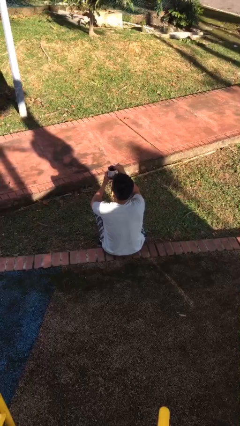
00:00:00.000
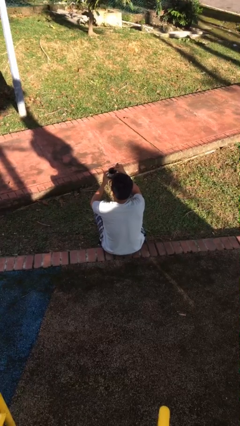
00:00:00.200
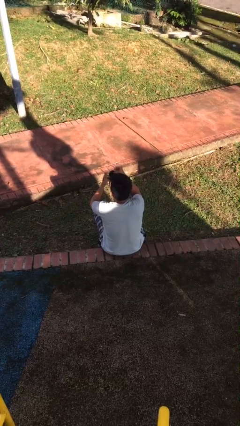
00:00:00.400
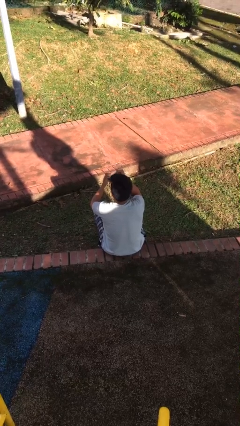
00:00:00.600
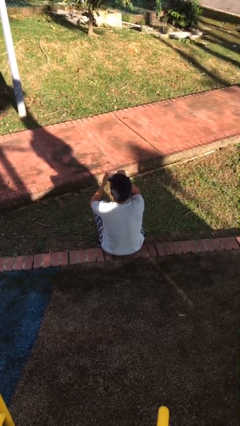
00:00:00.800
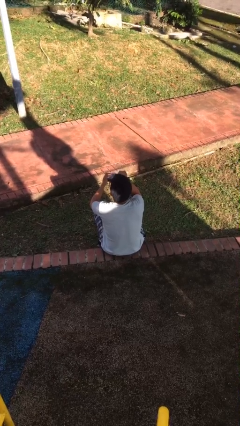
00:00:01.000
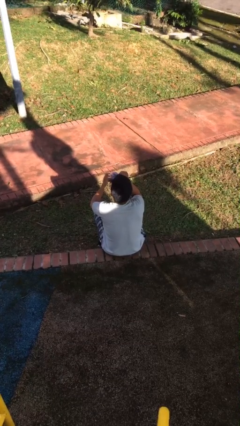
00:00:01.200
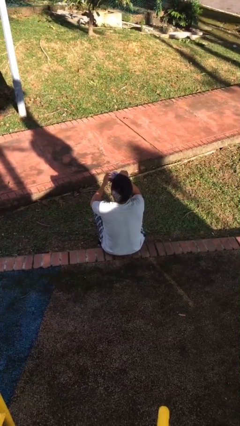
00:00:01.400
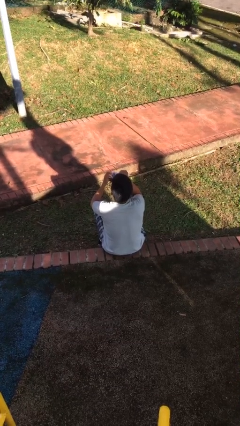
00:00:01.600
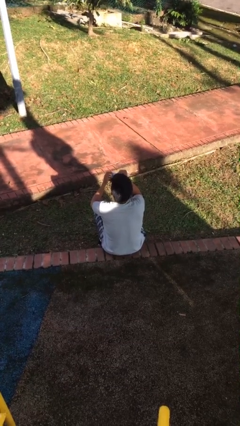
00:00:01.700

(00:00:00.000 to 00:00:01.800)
person drinks from mug

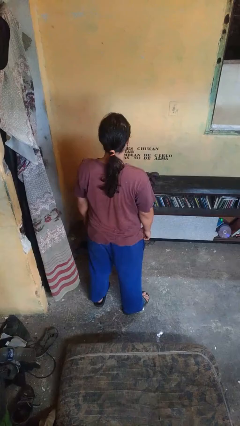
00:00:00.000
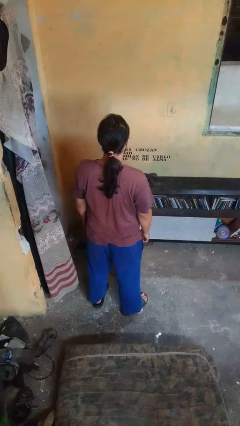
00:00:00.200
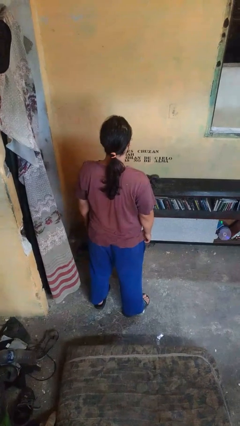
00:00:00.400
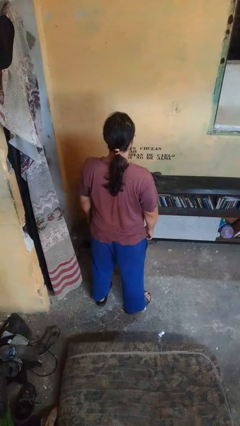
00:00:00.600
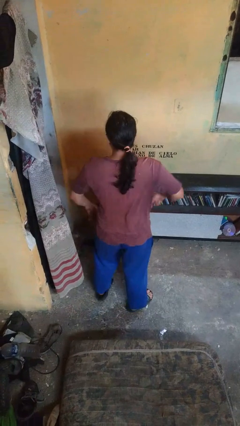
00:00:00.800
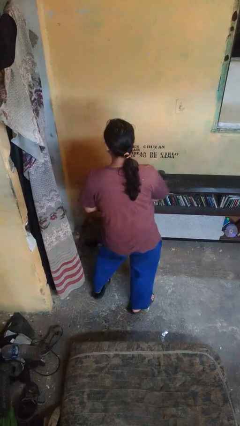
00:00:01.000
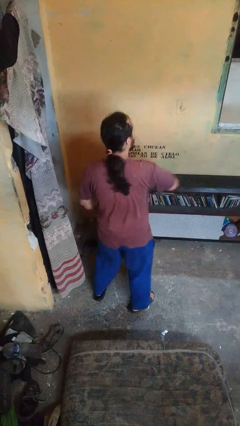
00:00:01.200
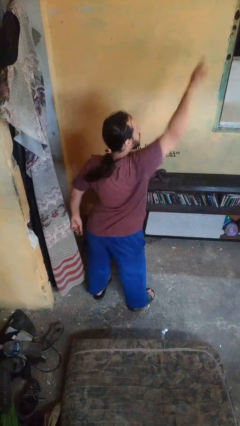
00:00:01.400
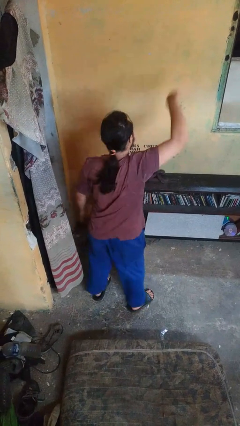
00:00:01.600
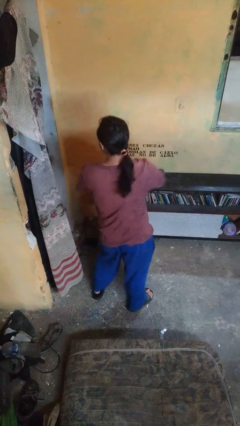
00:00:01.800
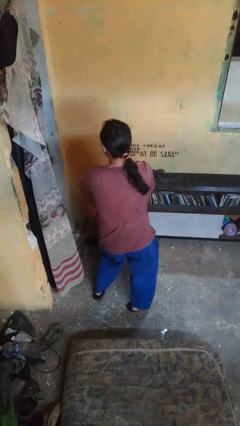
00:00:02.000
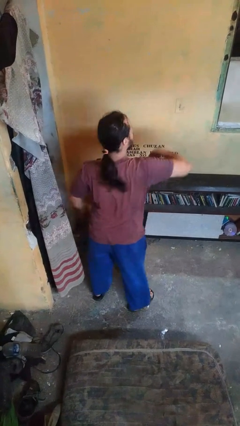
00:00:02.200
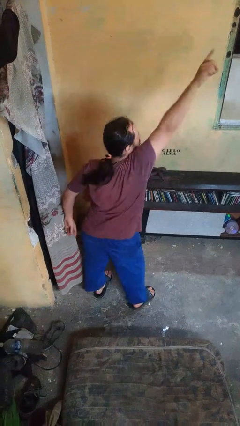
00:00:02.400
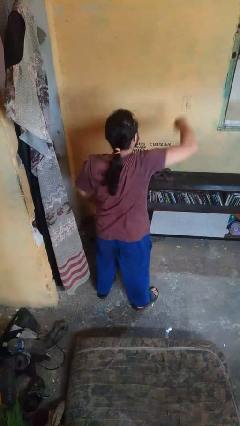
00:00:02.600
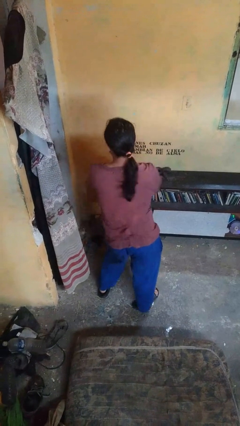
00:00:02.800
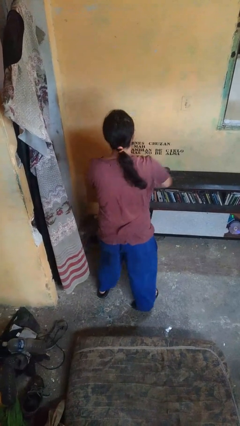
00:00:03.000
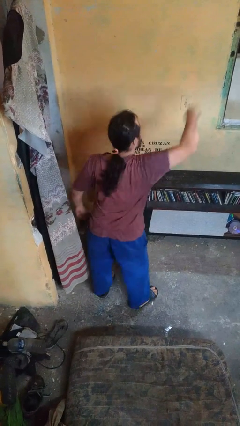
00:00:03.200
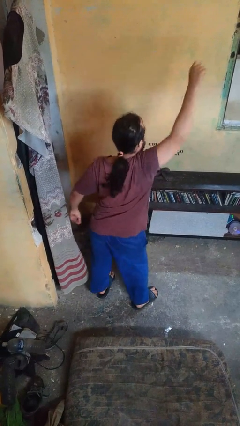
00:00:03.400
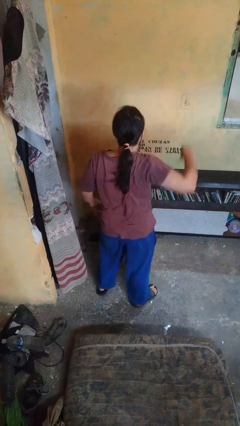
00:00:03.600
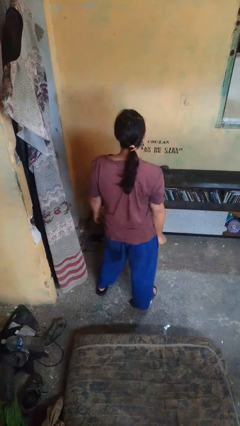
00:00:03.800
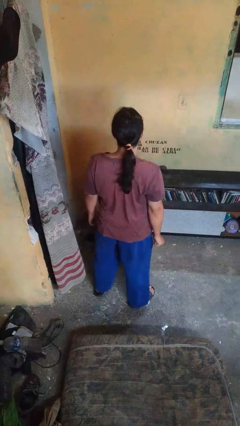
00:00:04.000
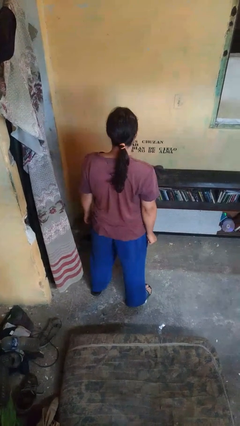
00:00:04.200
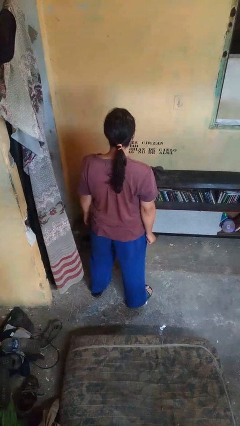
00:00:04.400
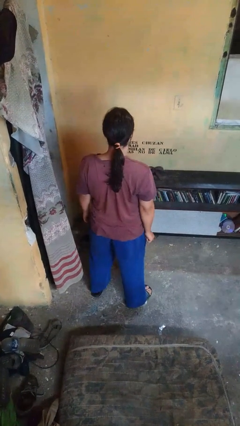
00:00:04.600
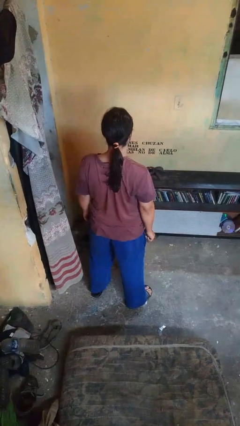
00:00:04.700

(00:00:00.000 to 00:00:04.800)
person dances in place

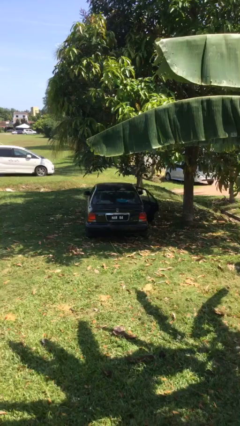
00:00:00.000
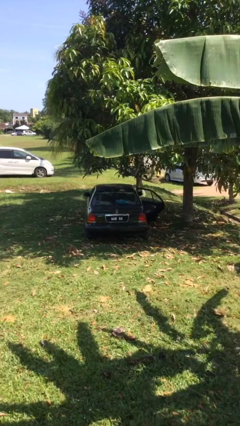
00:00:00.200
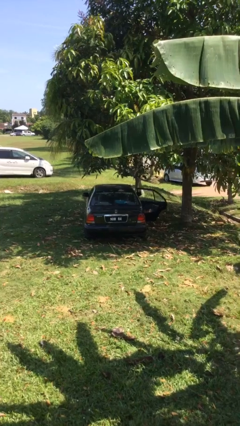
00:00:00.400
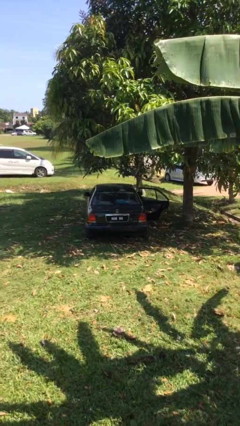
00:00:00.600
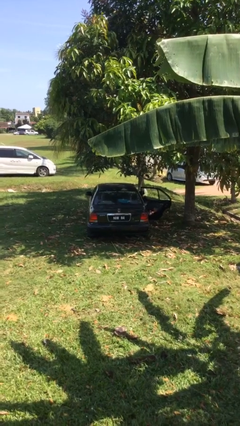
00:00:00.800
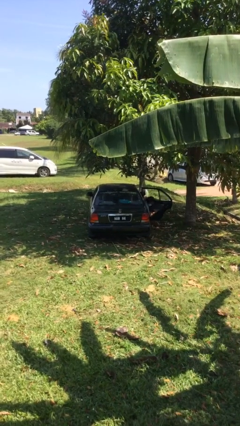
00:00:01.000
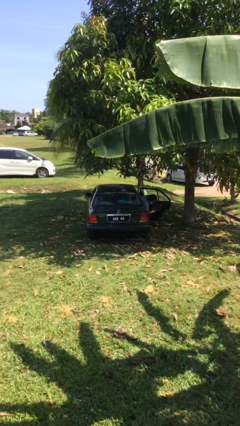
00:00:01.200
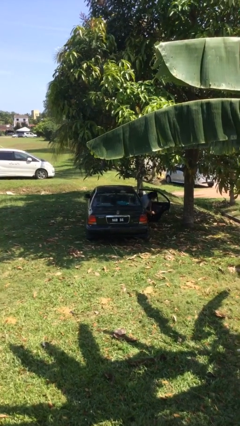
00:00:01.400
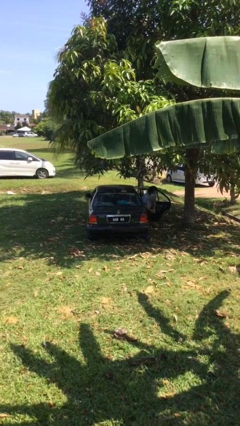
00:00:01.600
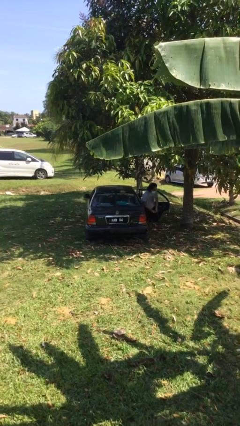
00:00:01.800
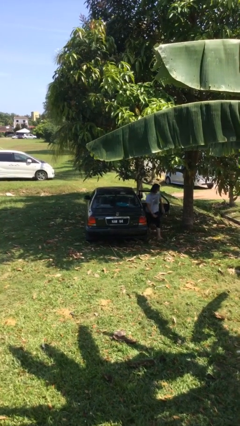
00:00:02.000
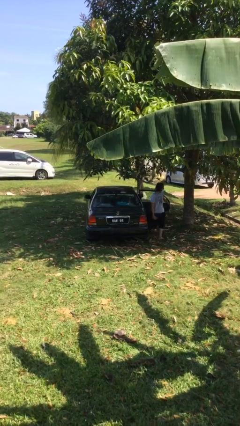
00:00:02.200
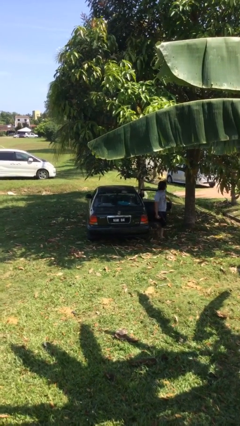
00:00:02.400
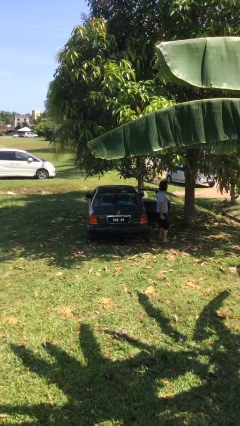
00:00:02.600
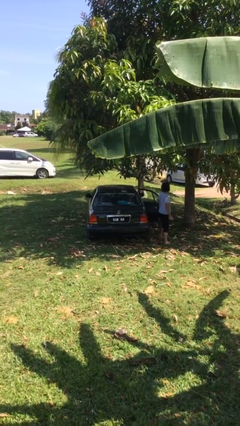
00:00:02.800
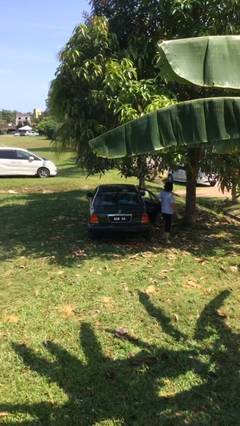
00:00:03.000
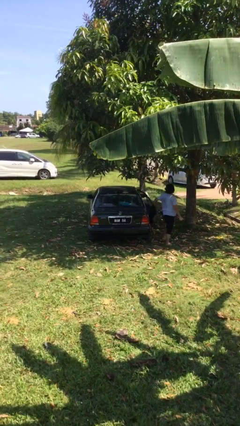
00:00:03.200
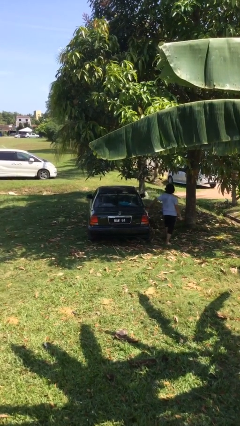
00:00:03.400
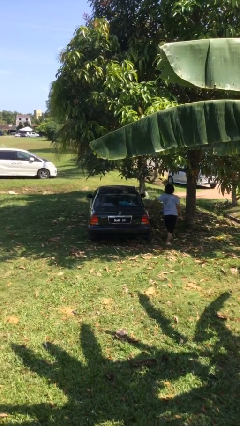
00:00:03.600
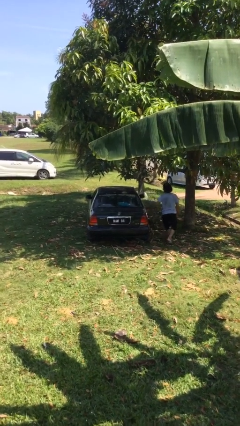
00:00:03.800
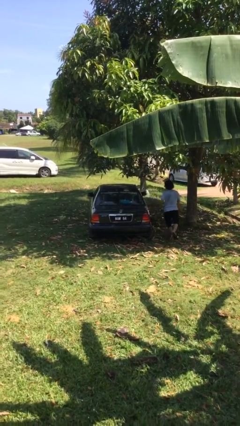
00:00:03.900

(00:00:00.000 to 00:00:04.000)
car drops off person

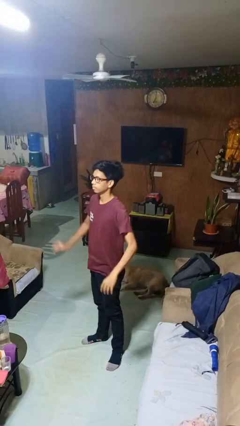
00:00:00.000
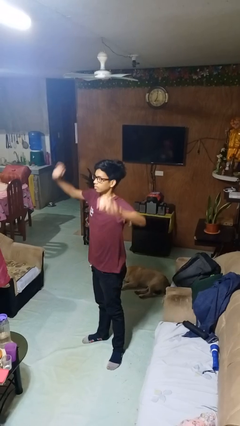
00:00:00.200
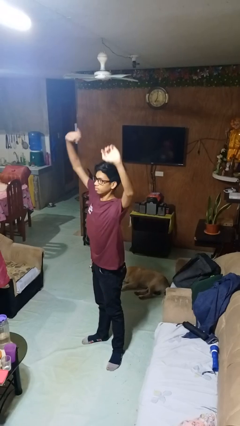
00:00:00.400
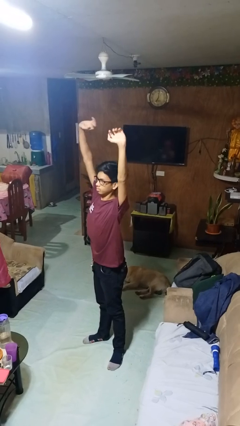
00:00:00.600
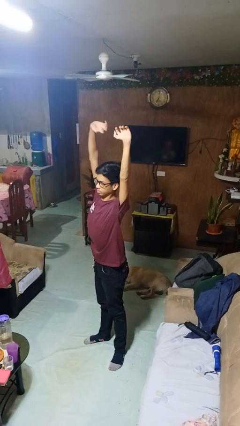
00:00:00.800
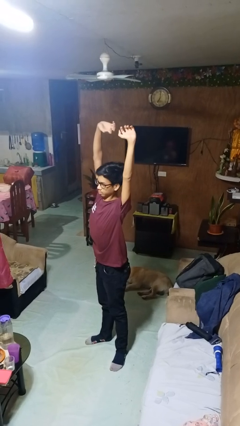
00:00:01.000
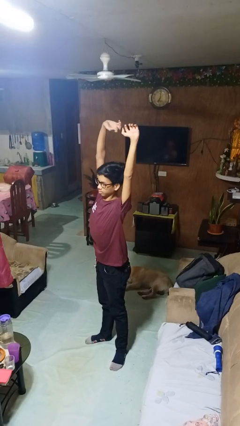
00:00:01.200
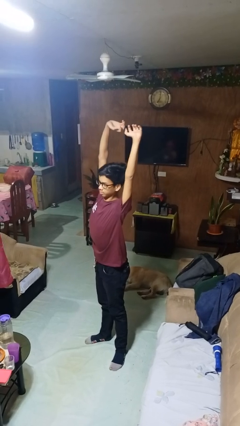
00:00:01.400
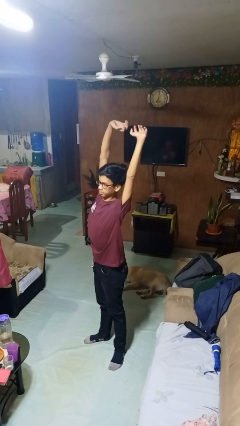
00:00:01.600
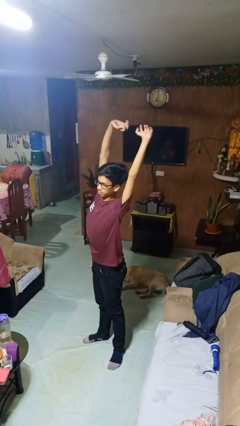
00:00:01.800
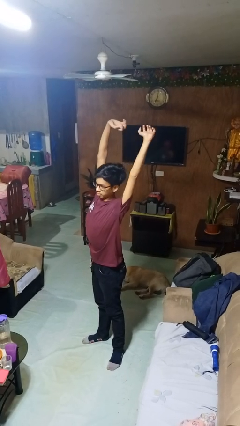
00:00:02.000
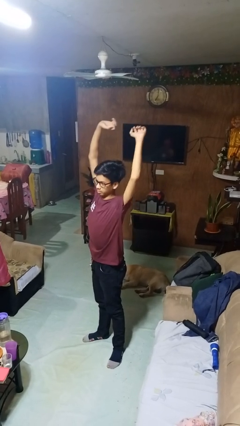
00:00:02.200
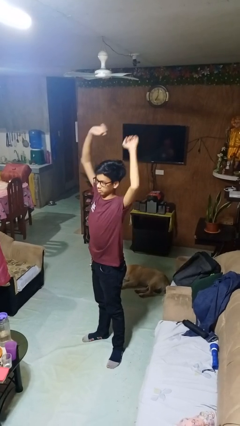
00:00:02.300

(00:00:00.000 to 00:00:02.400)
person stretches arms over head

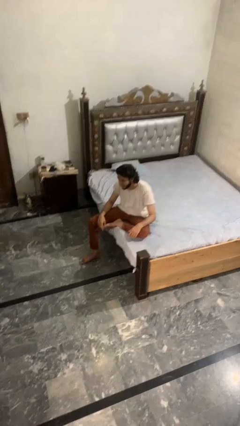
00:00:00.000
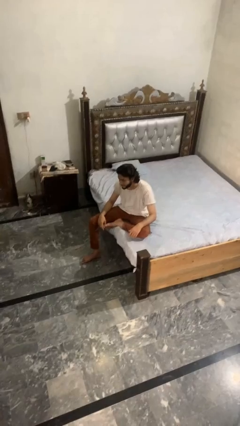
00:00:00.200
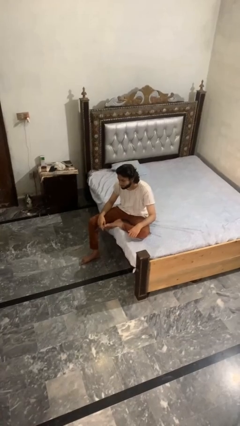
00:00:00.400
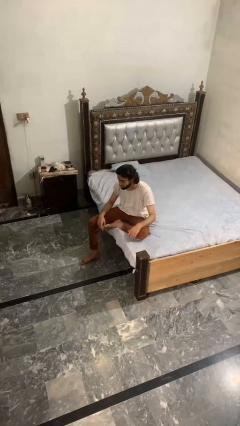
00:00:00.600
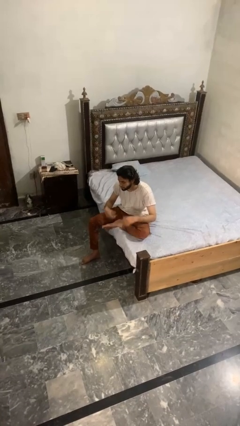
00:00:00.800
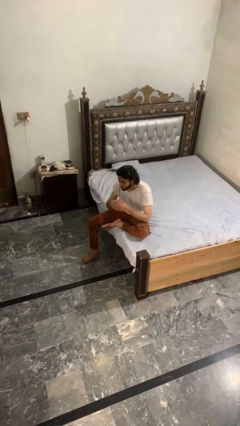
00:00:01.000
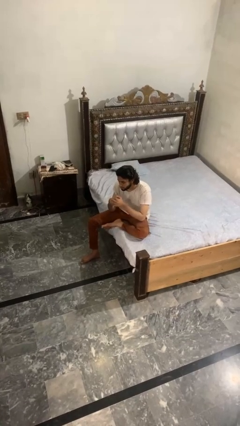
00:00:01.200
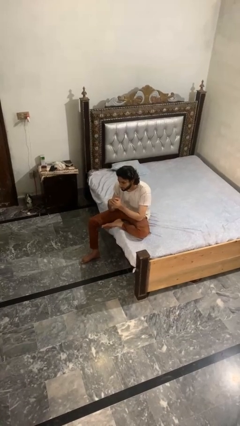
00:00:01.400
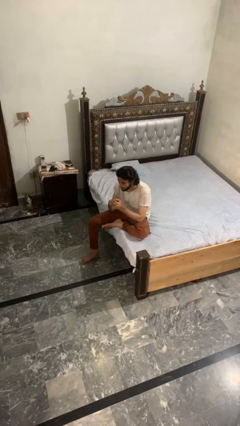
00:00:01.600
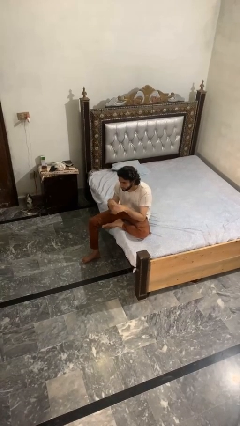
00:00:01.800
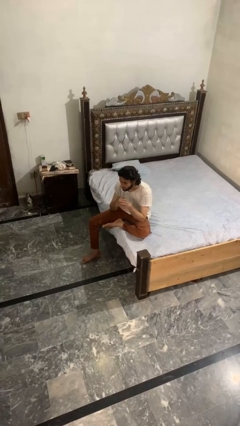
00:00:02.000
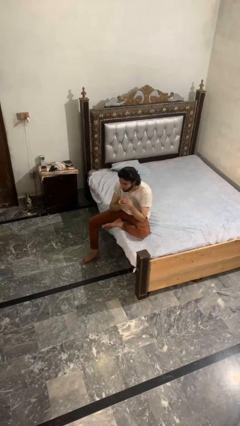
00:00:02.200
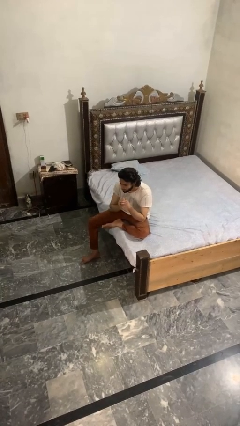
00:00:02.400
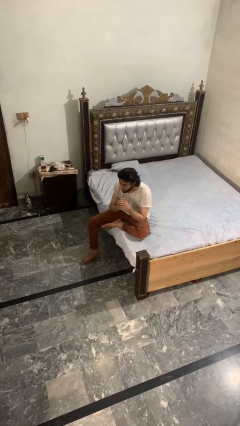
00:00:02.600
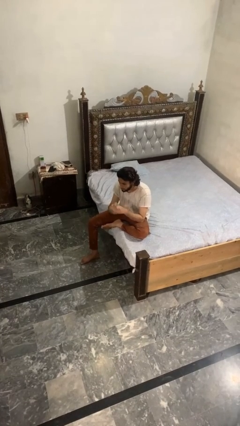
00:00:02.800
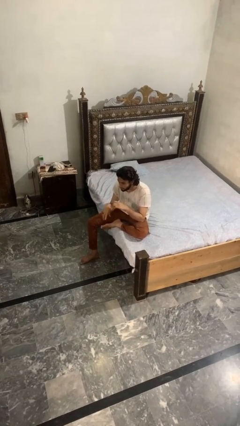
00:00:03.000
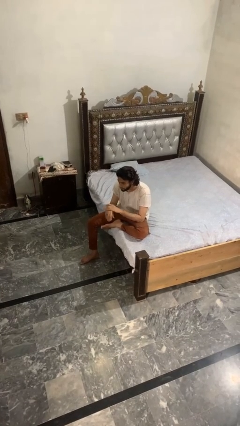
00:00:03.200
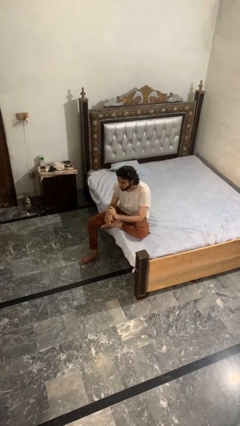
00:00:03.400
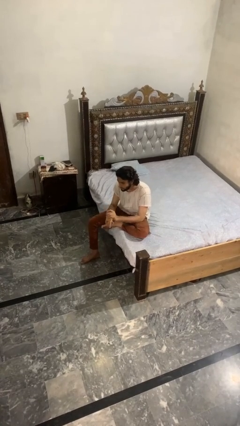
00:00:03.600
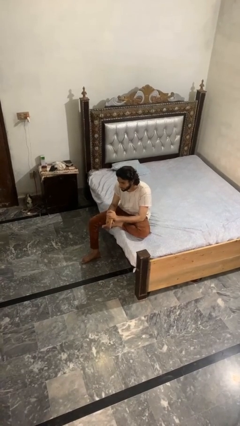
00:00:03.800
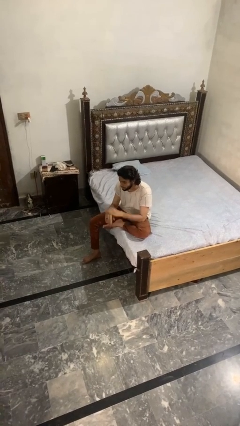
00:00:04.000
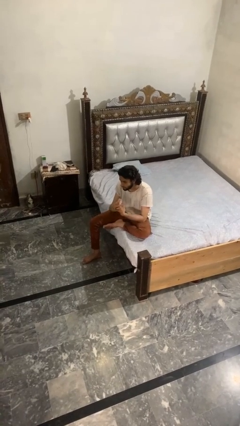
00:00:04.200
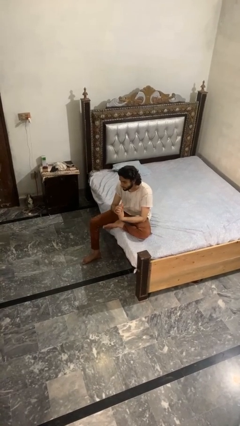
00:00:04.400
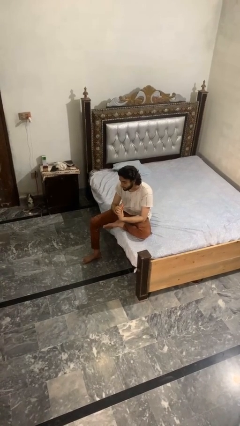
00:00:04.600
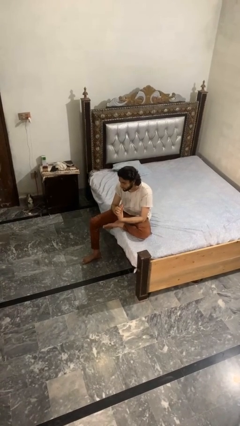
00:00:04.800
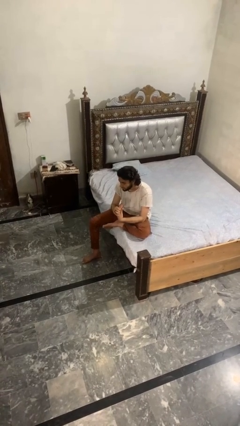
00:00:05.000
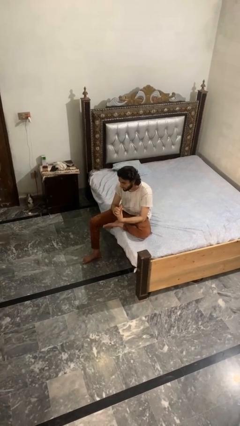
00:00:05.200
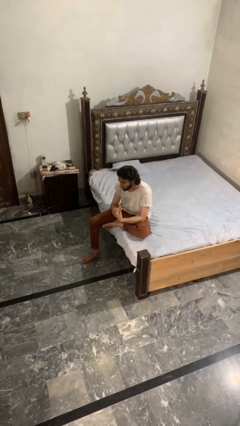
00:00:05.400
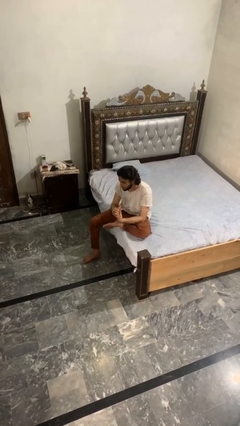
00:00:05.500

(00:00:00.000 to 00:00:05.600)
person cracks knuckles
